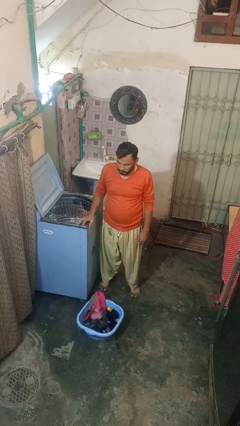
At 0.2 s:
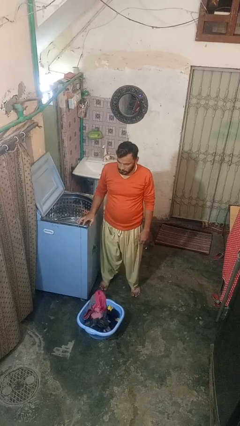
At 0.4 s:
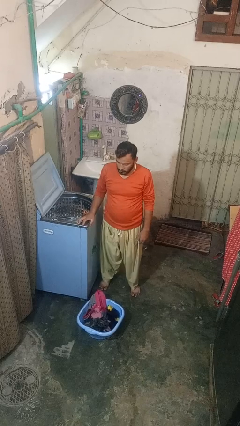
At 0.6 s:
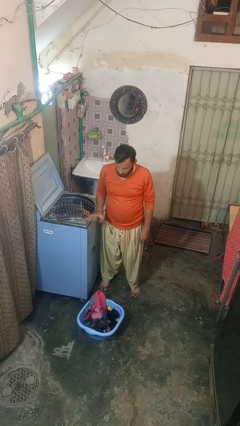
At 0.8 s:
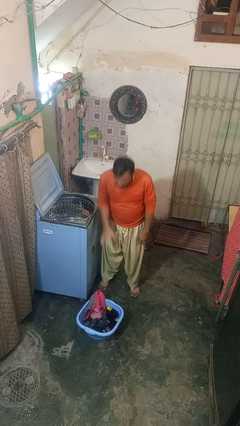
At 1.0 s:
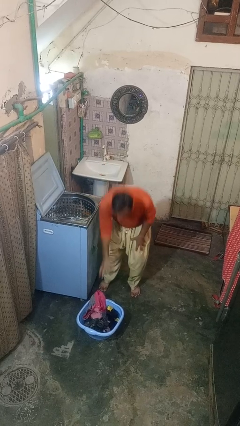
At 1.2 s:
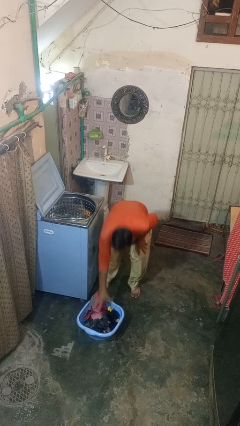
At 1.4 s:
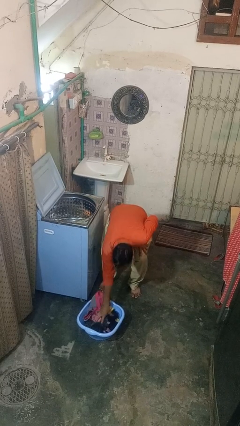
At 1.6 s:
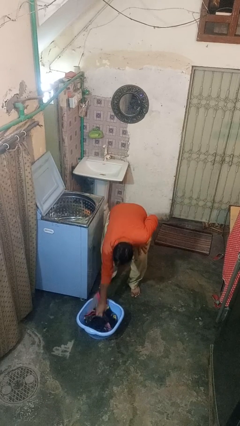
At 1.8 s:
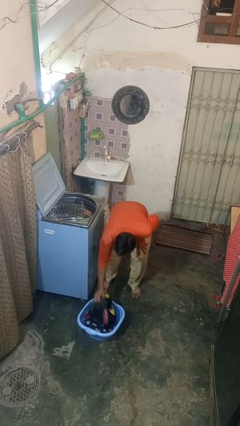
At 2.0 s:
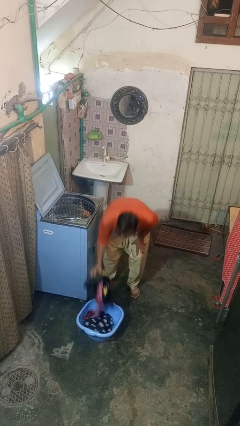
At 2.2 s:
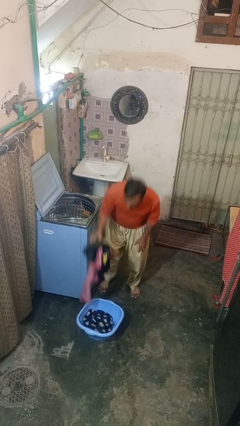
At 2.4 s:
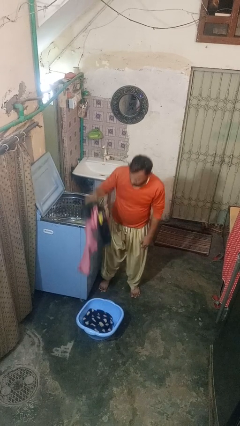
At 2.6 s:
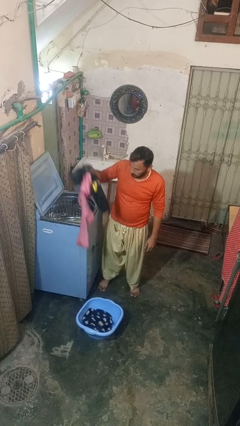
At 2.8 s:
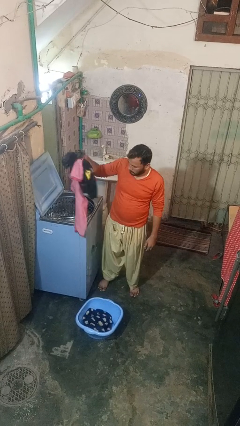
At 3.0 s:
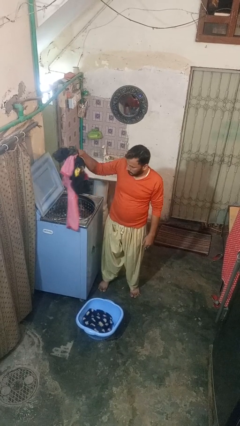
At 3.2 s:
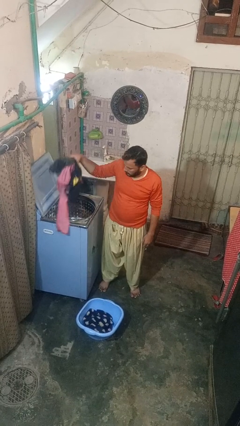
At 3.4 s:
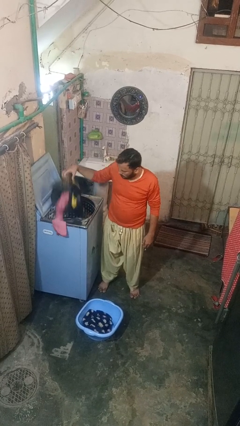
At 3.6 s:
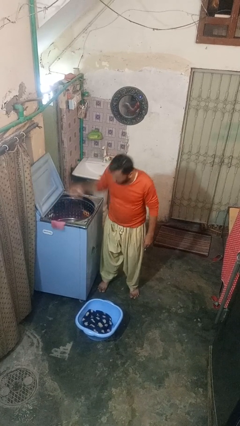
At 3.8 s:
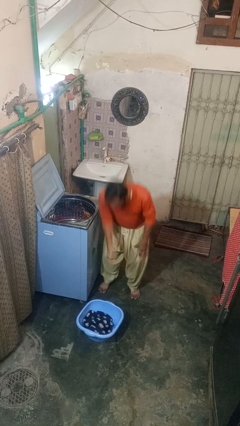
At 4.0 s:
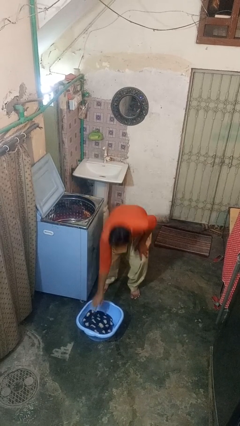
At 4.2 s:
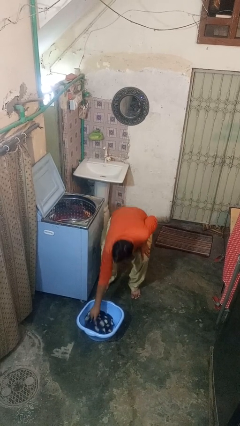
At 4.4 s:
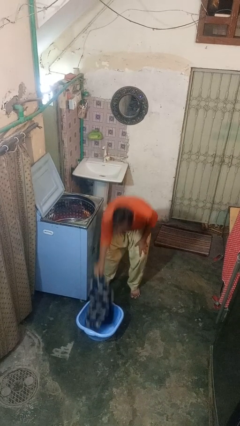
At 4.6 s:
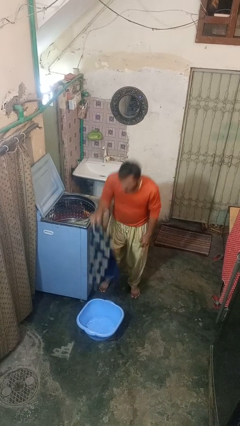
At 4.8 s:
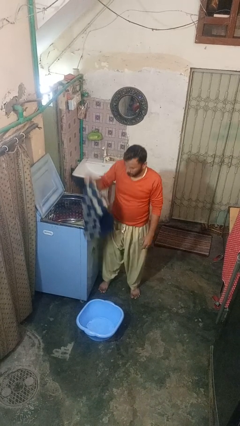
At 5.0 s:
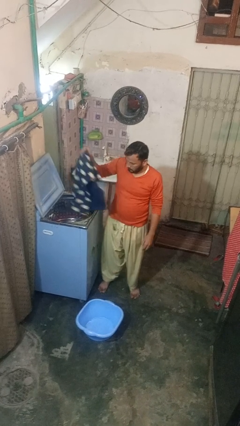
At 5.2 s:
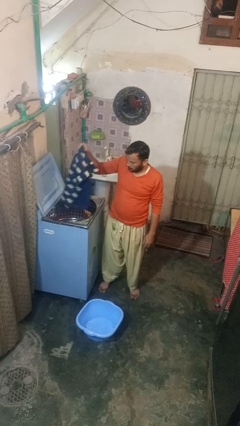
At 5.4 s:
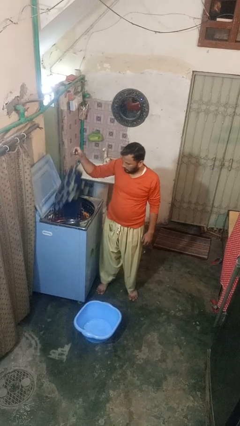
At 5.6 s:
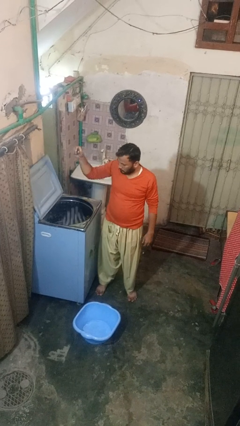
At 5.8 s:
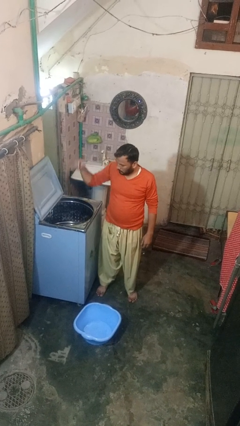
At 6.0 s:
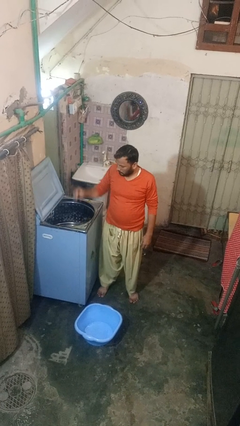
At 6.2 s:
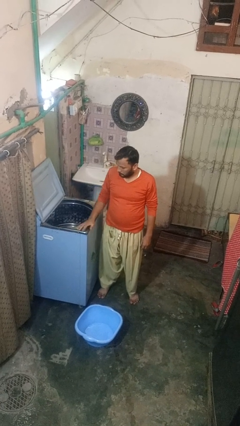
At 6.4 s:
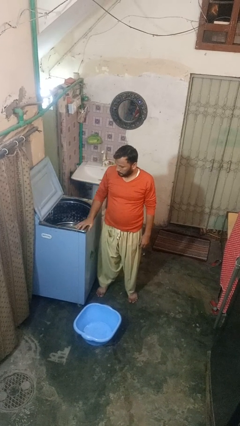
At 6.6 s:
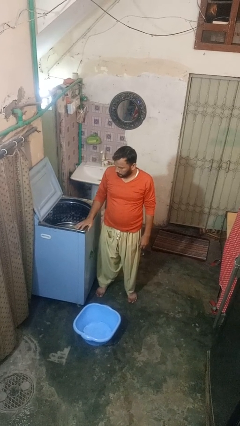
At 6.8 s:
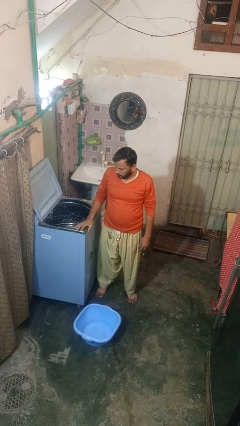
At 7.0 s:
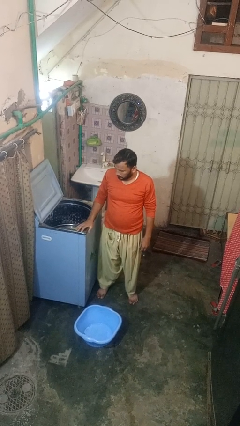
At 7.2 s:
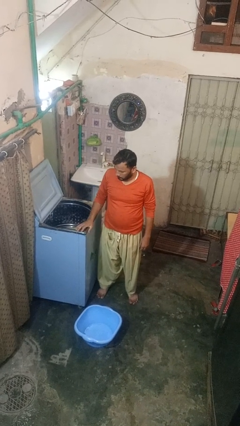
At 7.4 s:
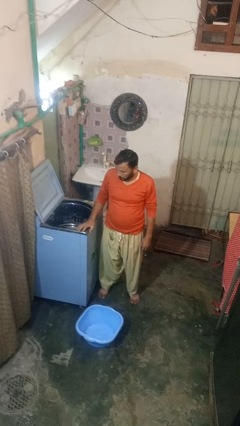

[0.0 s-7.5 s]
person loads clotheswasher

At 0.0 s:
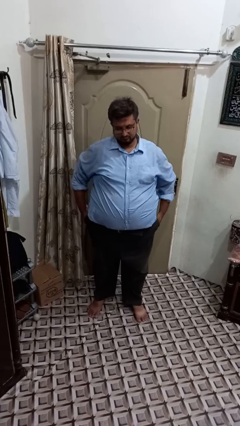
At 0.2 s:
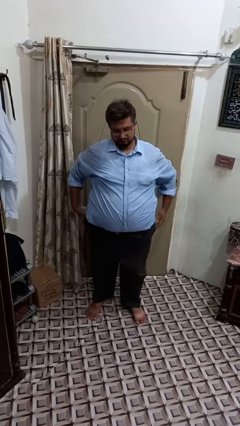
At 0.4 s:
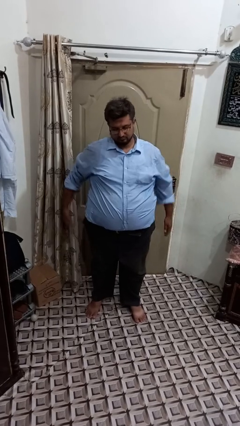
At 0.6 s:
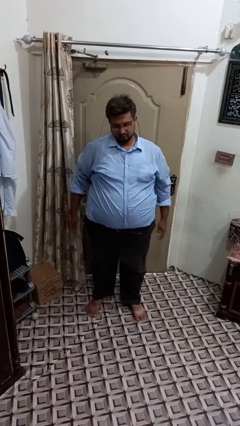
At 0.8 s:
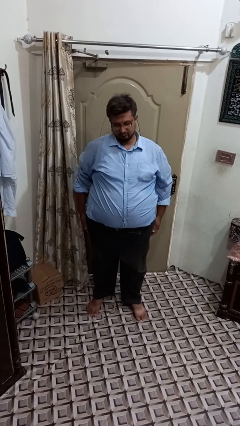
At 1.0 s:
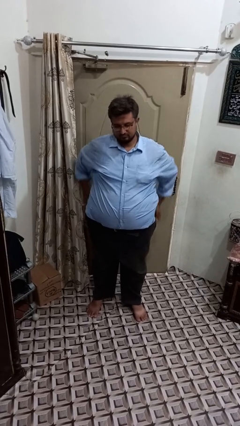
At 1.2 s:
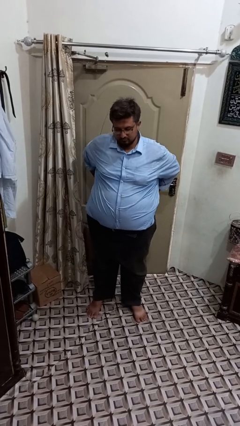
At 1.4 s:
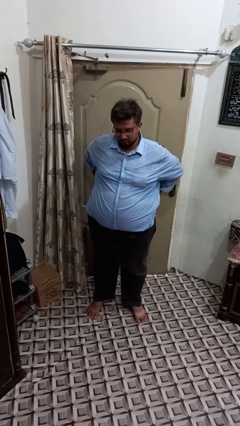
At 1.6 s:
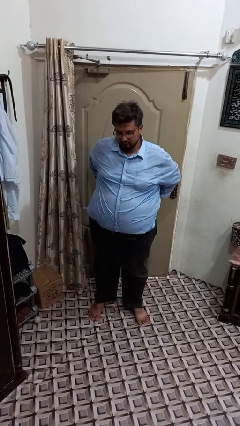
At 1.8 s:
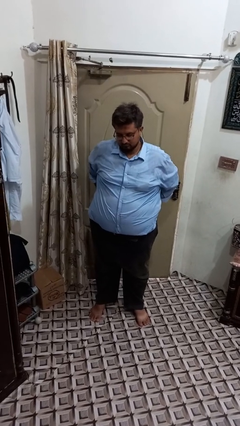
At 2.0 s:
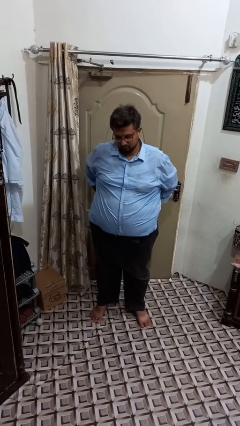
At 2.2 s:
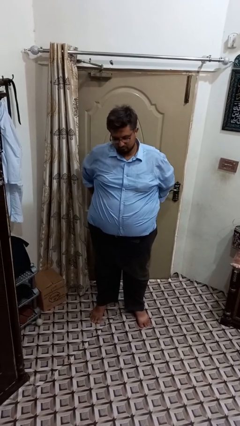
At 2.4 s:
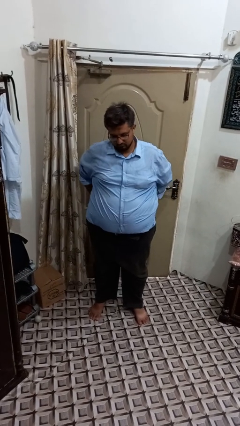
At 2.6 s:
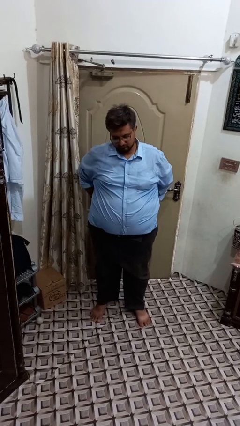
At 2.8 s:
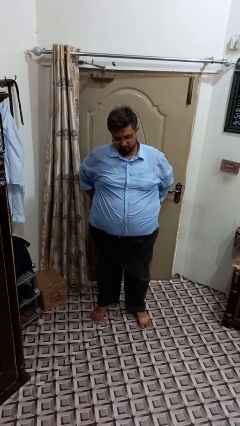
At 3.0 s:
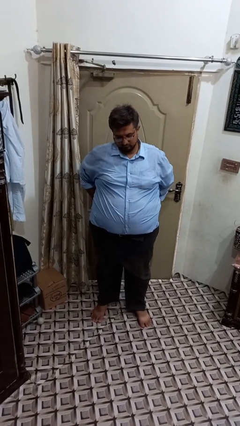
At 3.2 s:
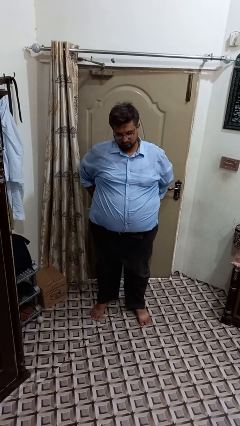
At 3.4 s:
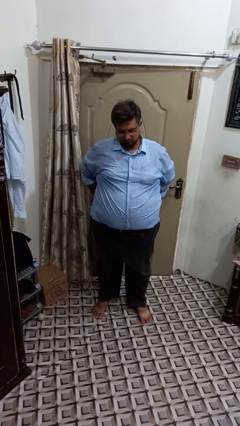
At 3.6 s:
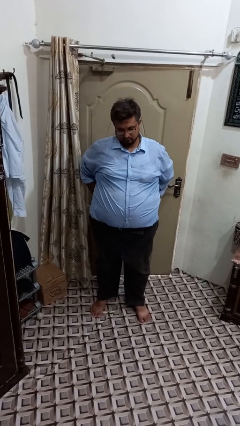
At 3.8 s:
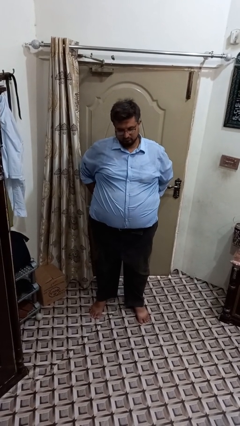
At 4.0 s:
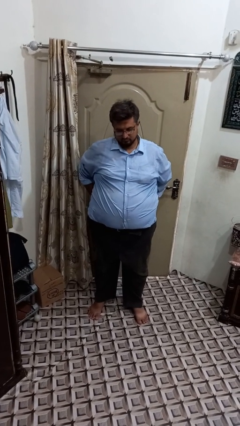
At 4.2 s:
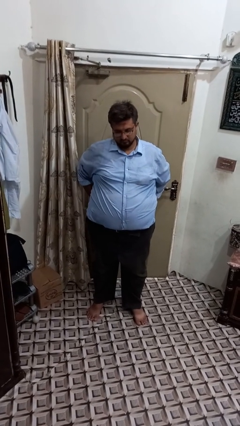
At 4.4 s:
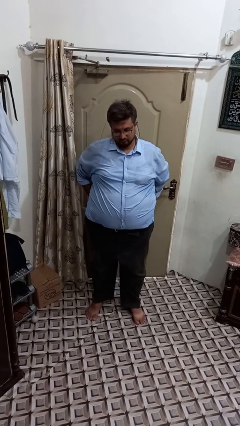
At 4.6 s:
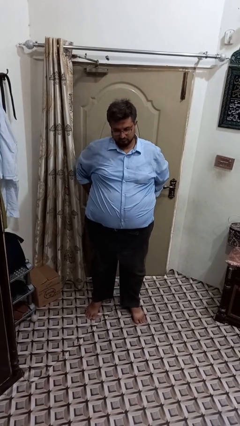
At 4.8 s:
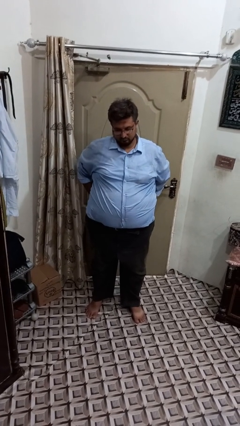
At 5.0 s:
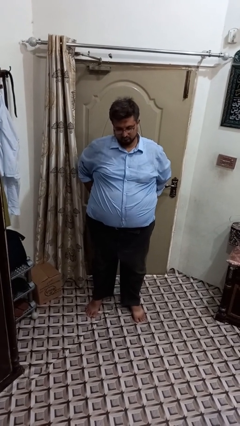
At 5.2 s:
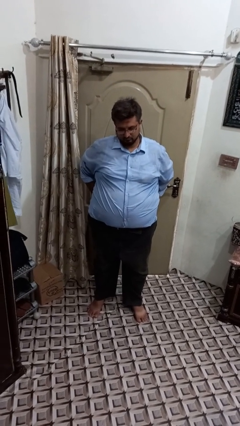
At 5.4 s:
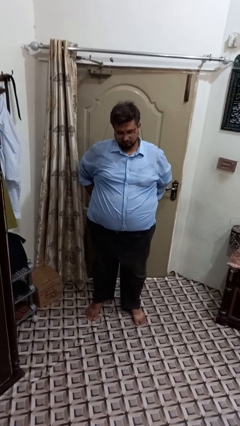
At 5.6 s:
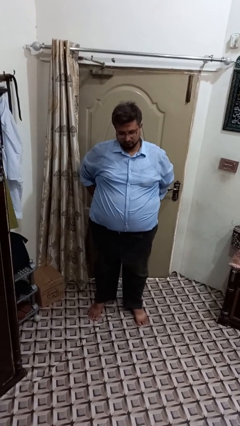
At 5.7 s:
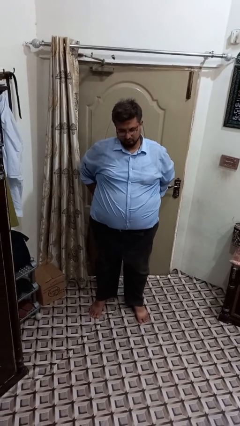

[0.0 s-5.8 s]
person puts hands in back pockets

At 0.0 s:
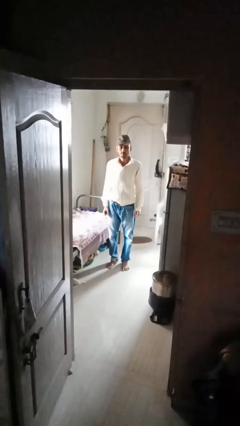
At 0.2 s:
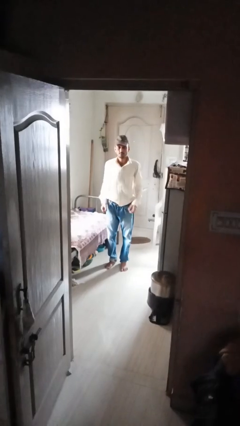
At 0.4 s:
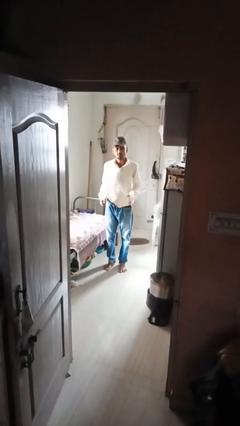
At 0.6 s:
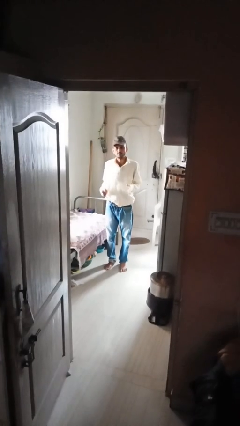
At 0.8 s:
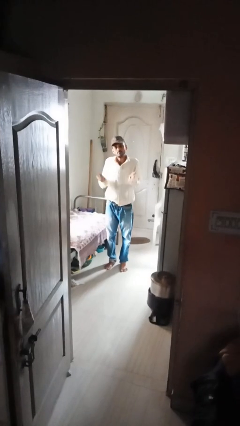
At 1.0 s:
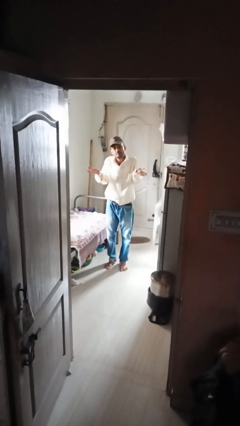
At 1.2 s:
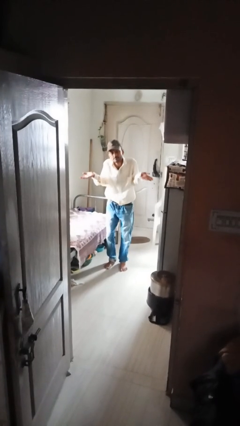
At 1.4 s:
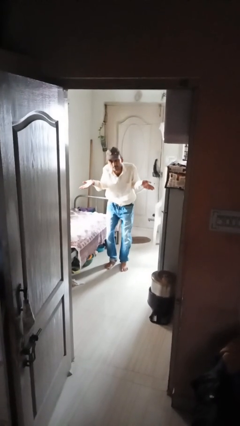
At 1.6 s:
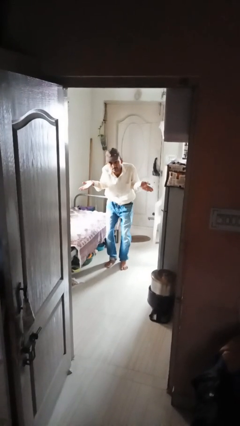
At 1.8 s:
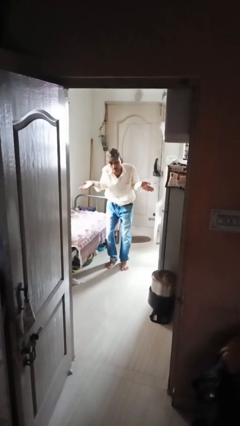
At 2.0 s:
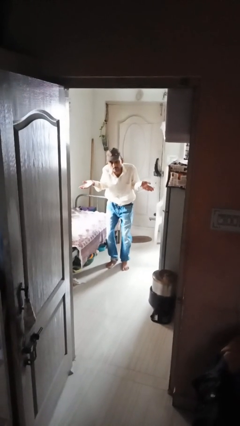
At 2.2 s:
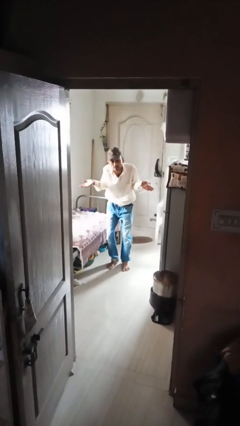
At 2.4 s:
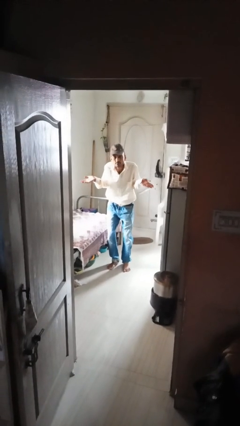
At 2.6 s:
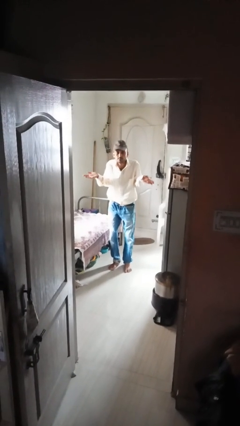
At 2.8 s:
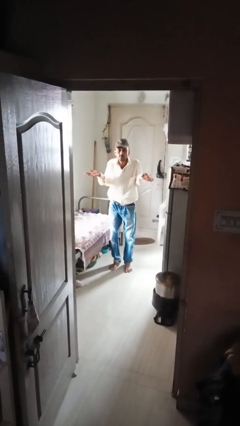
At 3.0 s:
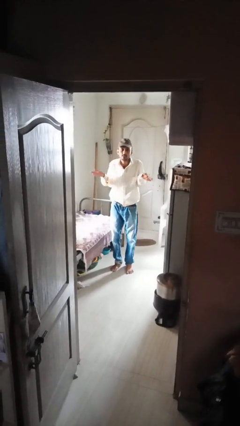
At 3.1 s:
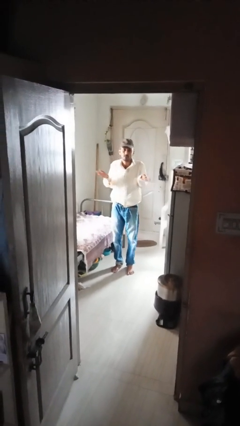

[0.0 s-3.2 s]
person shrugs

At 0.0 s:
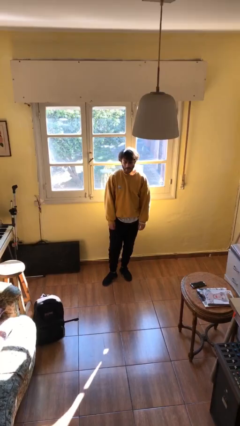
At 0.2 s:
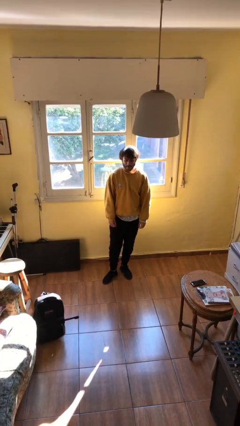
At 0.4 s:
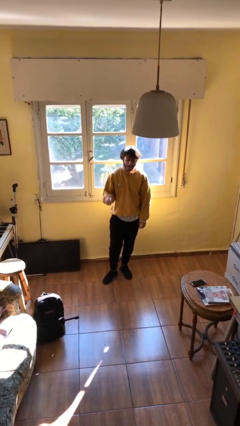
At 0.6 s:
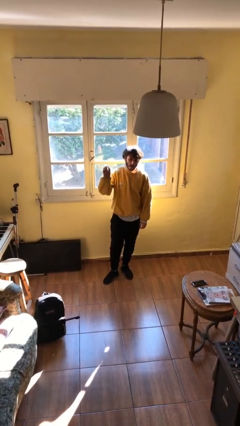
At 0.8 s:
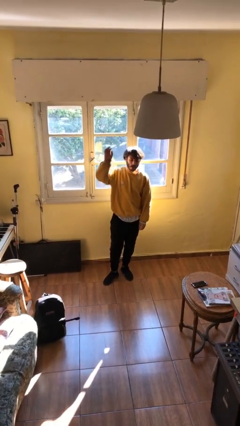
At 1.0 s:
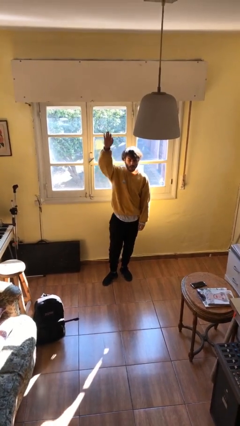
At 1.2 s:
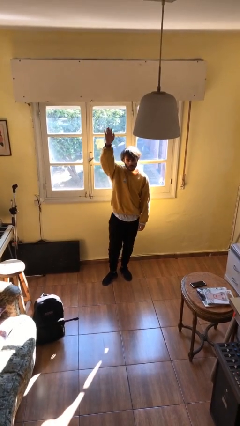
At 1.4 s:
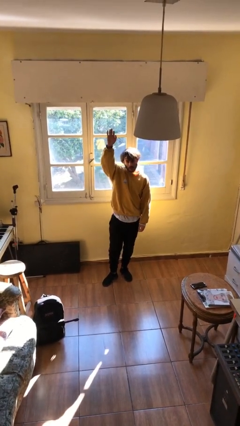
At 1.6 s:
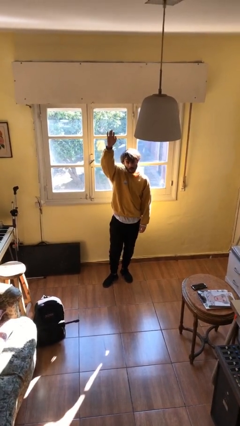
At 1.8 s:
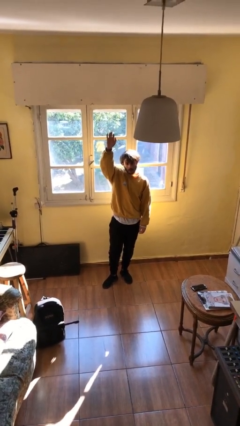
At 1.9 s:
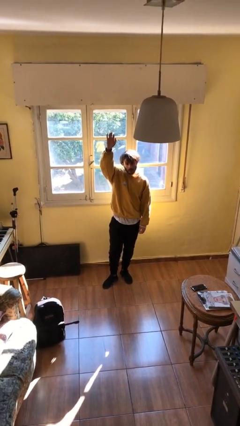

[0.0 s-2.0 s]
person gestures raise hand
